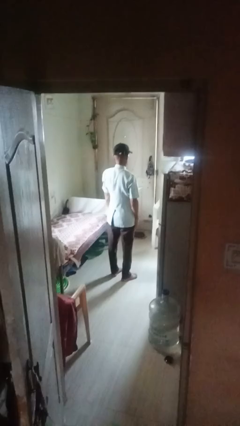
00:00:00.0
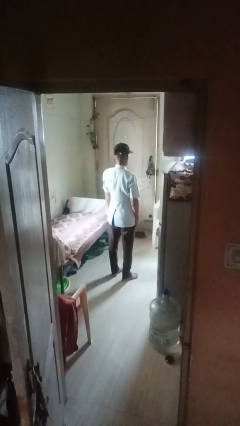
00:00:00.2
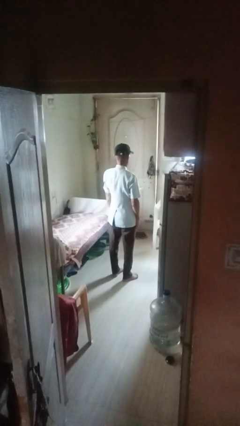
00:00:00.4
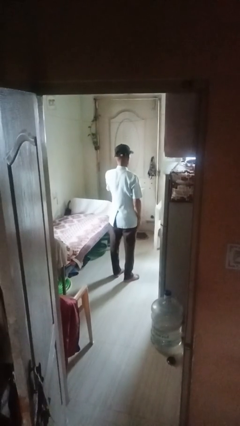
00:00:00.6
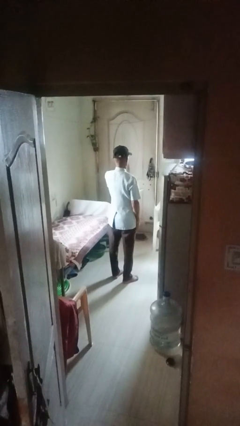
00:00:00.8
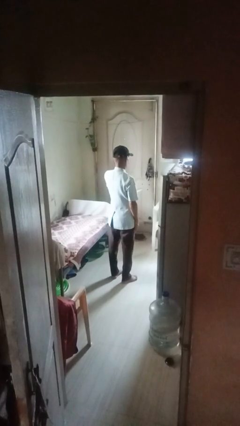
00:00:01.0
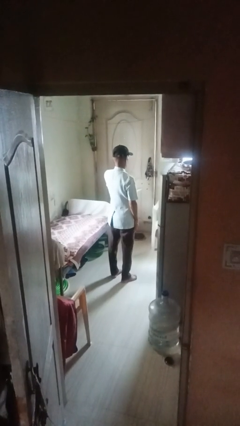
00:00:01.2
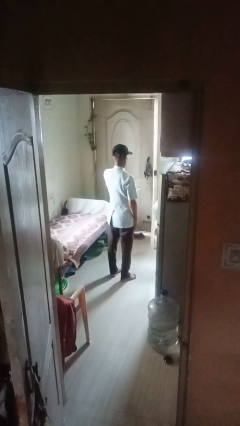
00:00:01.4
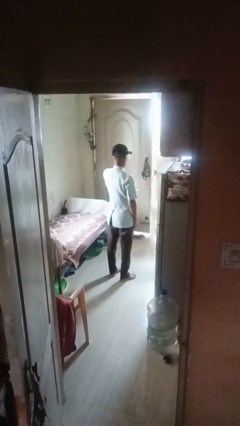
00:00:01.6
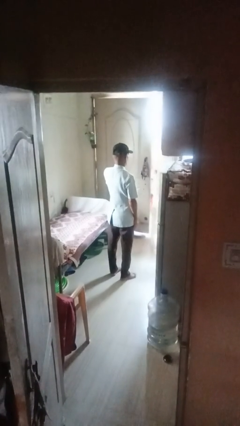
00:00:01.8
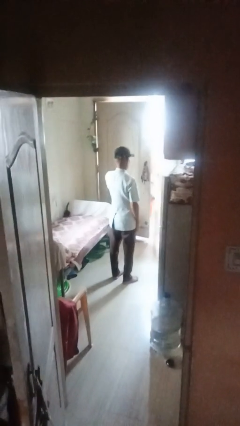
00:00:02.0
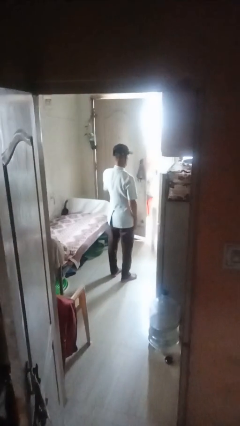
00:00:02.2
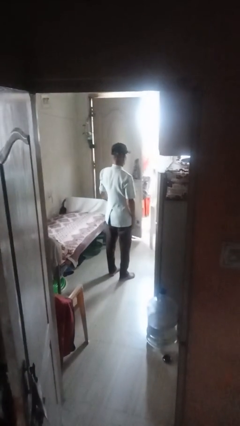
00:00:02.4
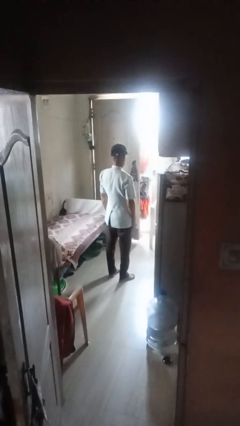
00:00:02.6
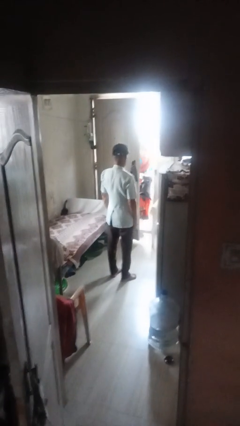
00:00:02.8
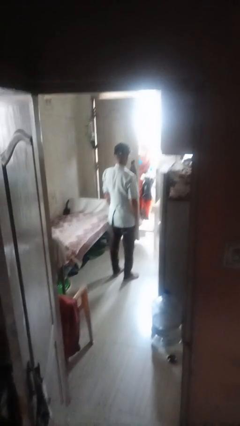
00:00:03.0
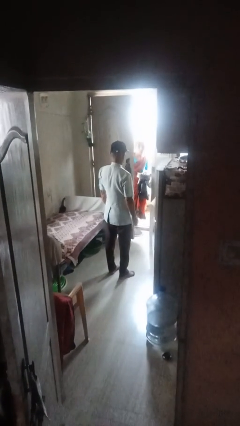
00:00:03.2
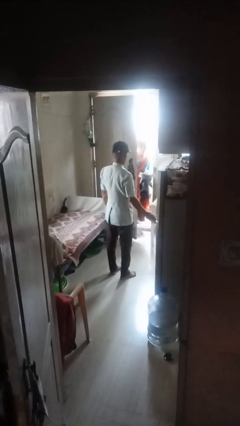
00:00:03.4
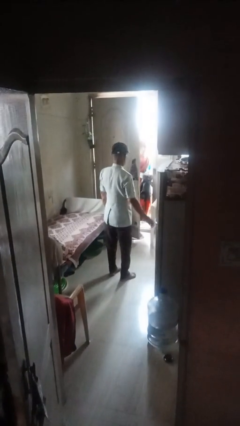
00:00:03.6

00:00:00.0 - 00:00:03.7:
person gestures stop

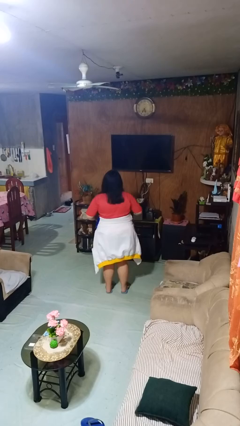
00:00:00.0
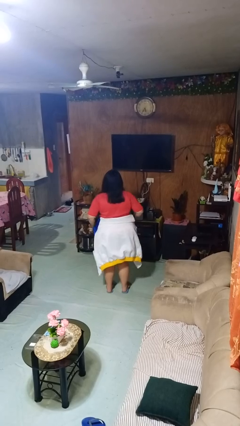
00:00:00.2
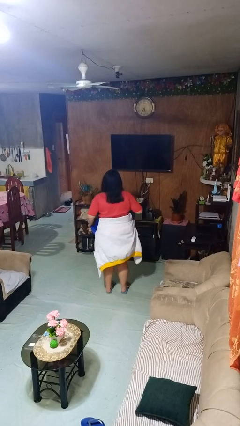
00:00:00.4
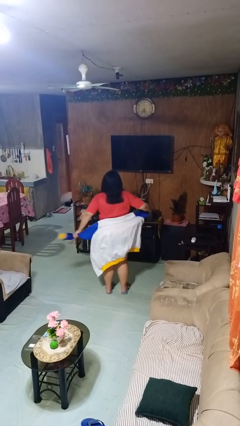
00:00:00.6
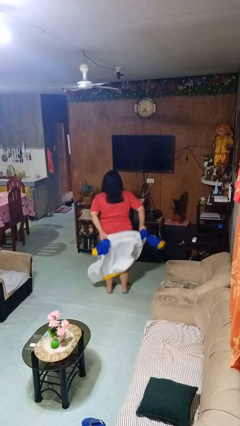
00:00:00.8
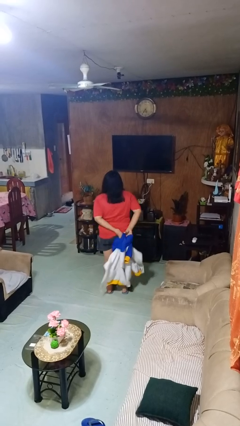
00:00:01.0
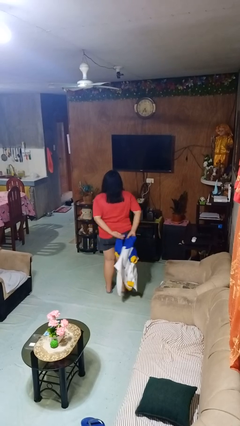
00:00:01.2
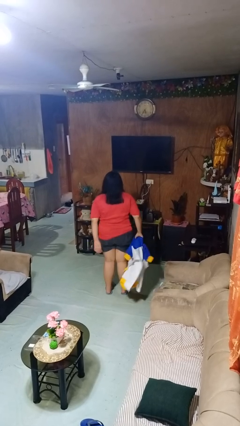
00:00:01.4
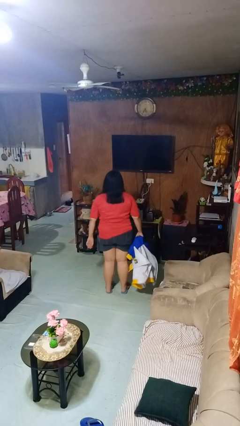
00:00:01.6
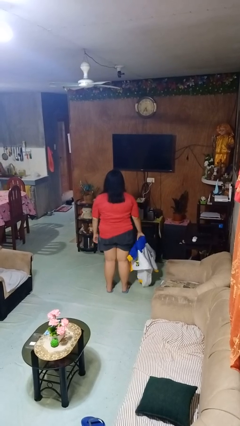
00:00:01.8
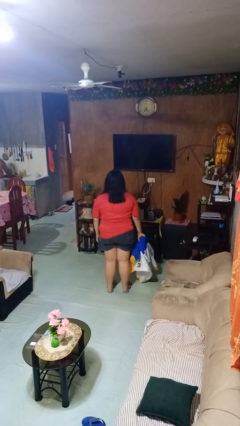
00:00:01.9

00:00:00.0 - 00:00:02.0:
person unties jacket around waist

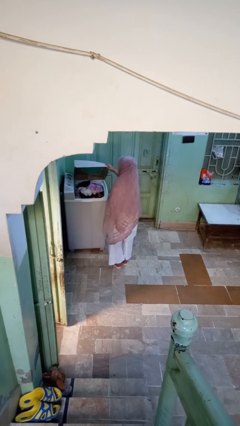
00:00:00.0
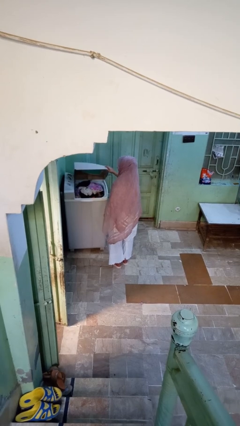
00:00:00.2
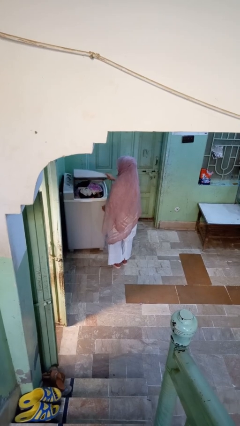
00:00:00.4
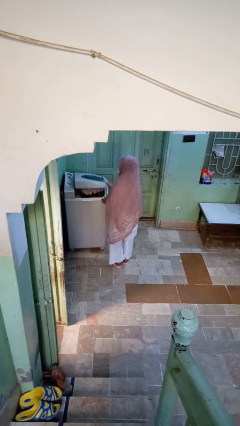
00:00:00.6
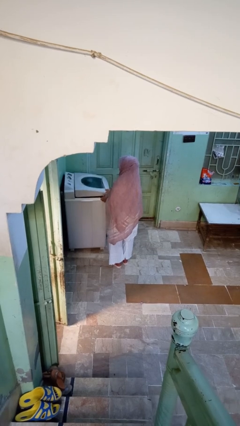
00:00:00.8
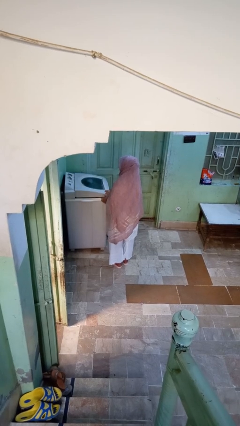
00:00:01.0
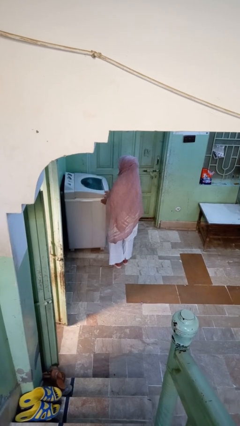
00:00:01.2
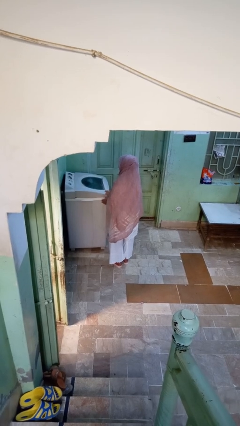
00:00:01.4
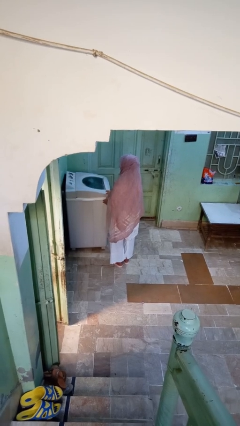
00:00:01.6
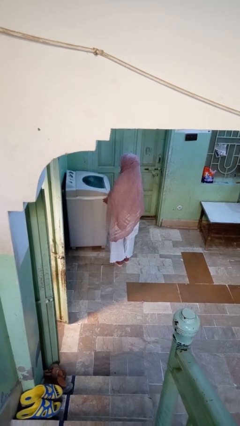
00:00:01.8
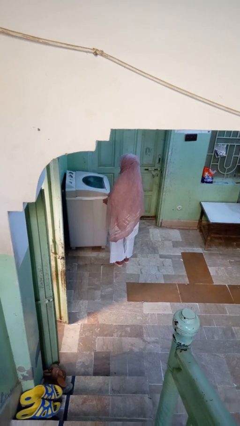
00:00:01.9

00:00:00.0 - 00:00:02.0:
person closes clothes washer

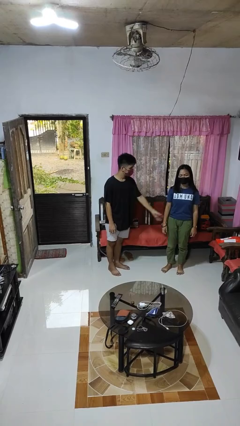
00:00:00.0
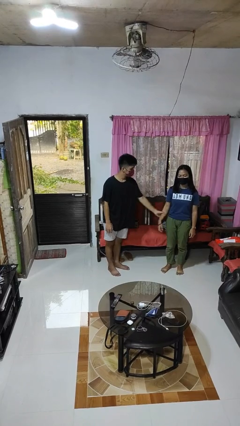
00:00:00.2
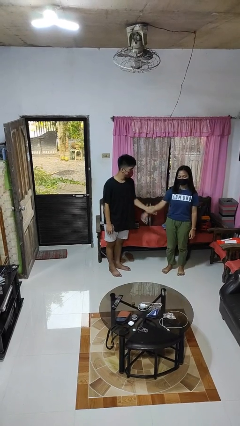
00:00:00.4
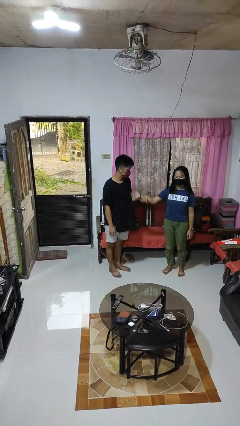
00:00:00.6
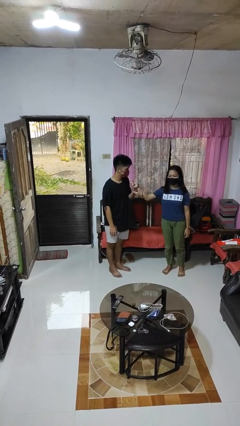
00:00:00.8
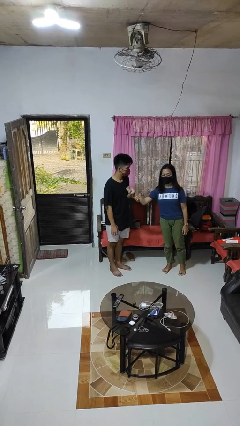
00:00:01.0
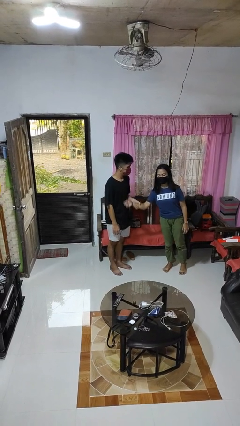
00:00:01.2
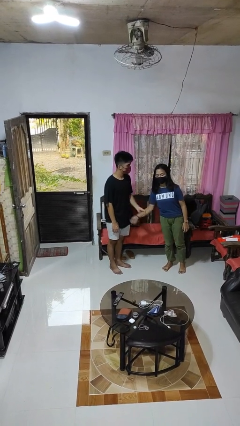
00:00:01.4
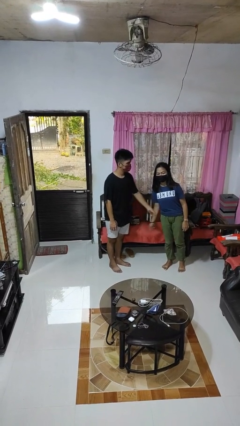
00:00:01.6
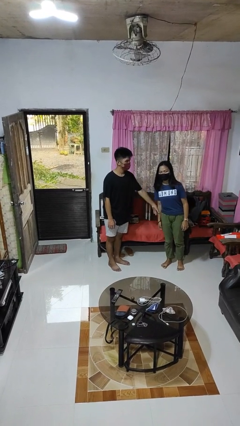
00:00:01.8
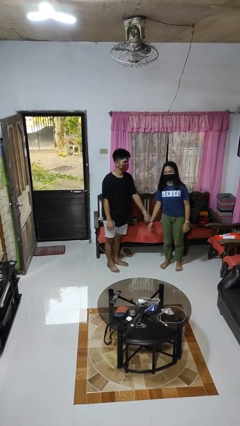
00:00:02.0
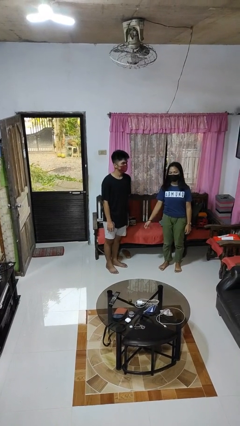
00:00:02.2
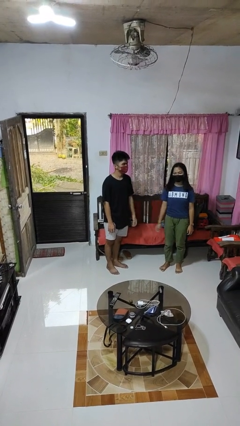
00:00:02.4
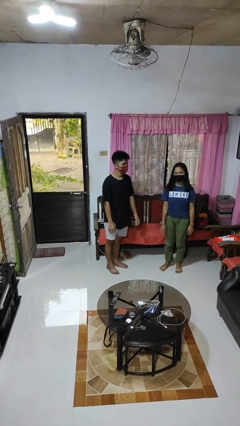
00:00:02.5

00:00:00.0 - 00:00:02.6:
person grabs person by forearm

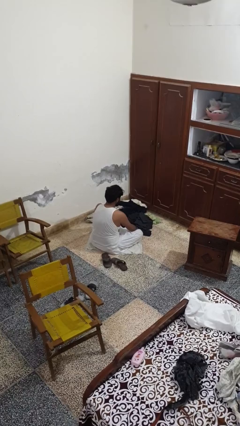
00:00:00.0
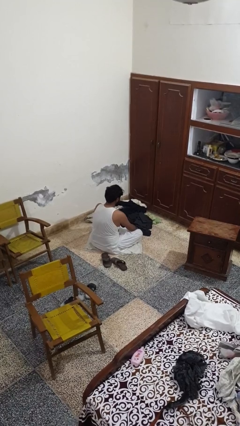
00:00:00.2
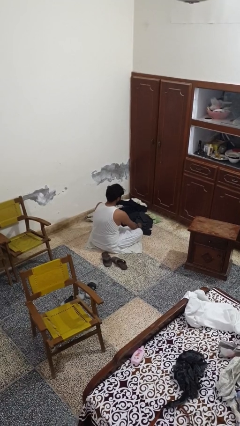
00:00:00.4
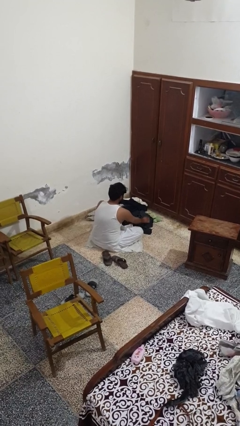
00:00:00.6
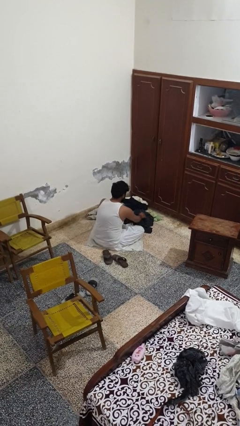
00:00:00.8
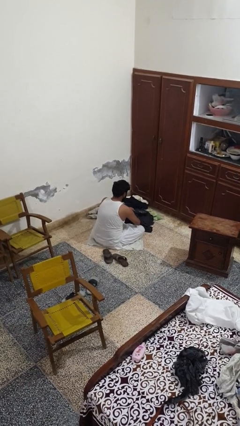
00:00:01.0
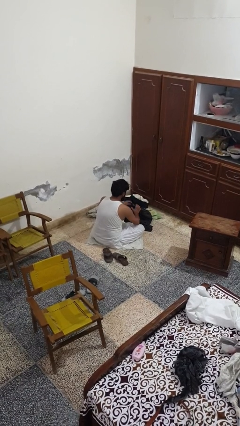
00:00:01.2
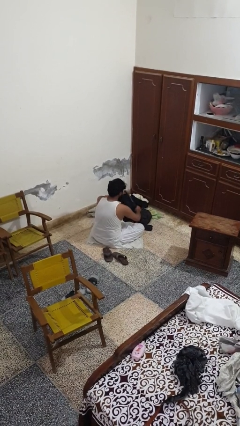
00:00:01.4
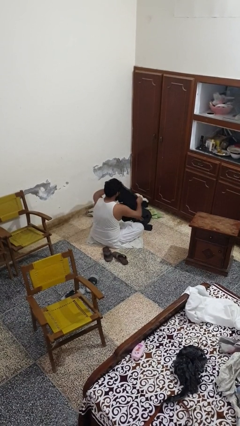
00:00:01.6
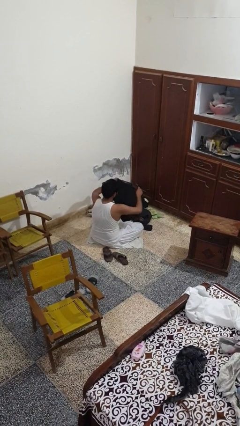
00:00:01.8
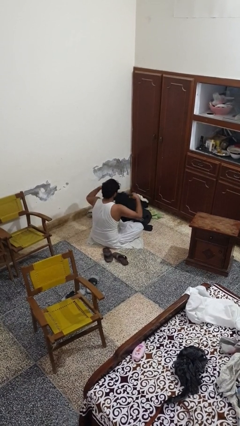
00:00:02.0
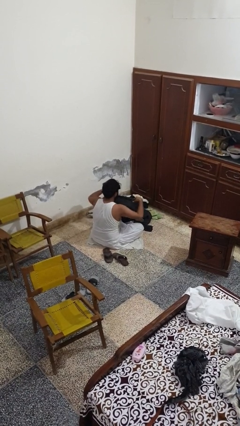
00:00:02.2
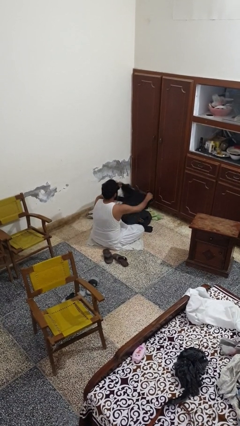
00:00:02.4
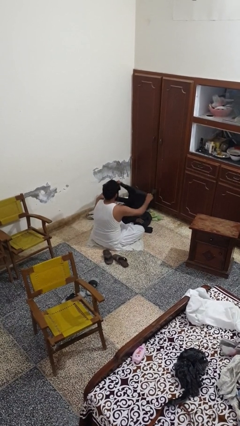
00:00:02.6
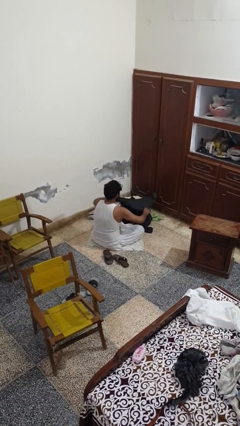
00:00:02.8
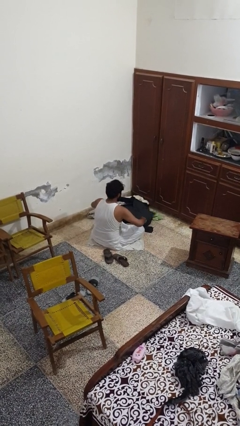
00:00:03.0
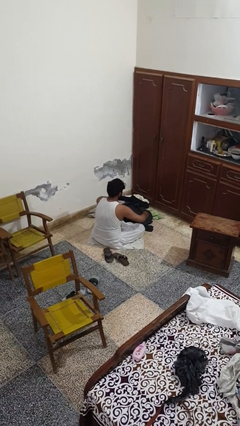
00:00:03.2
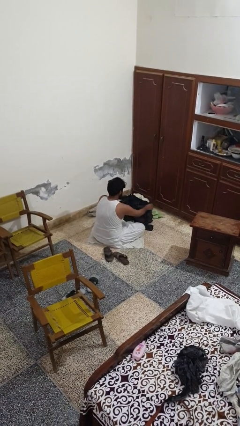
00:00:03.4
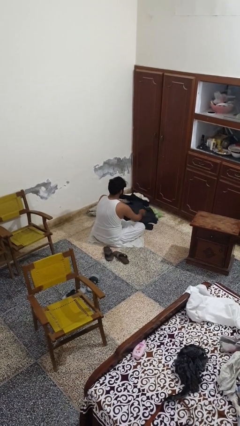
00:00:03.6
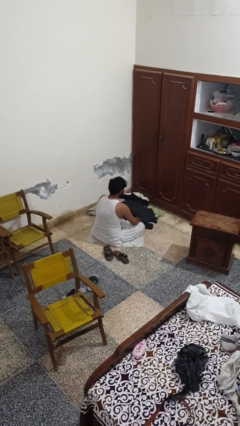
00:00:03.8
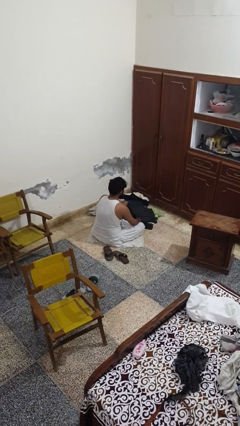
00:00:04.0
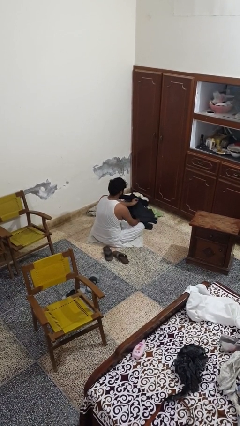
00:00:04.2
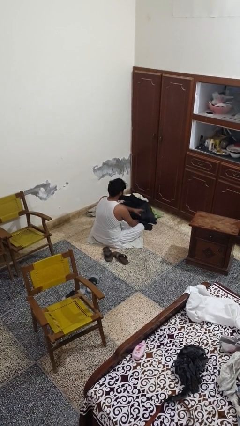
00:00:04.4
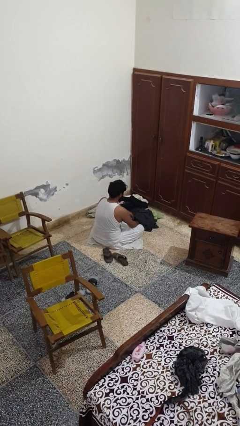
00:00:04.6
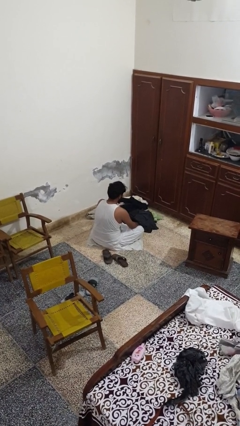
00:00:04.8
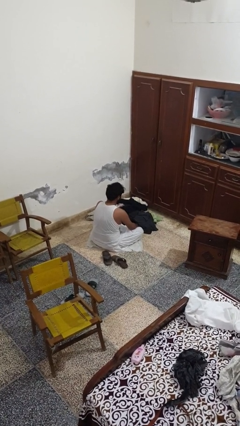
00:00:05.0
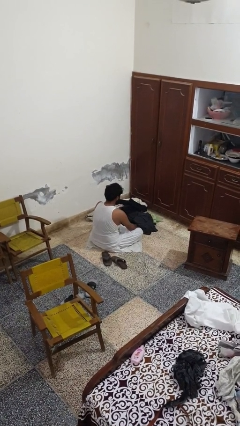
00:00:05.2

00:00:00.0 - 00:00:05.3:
person folds shirt

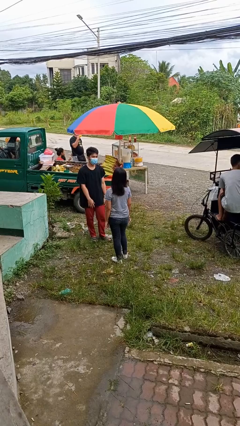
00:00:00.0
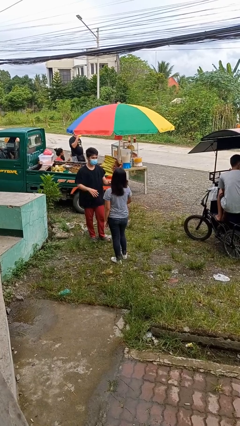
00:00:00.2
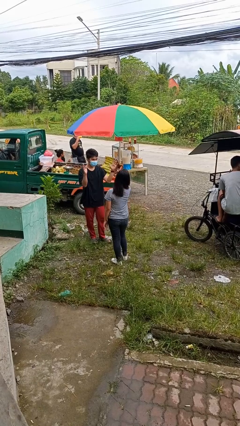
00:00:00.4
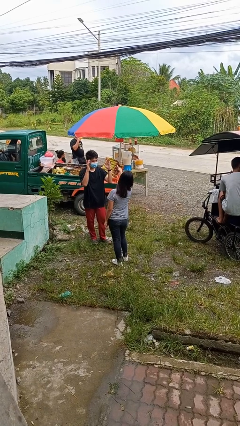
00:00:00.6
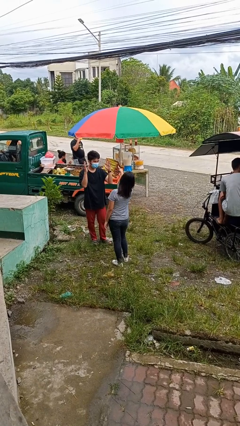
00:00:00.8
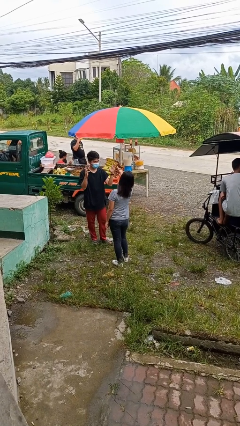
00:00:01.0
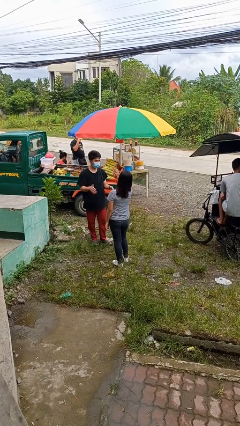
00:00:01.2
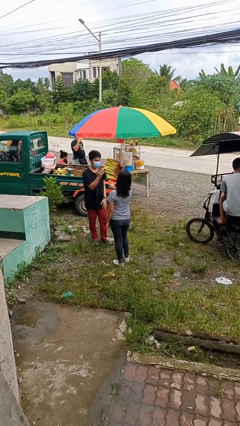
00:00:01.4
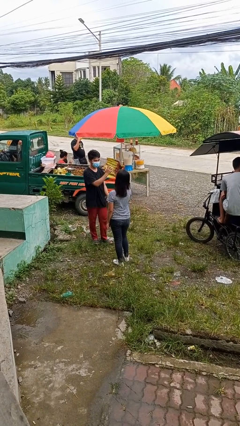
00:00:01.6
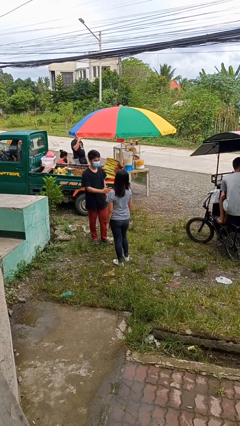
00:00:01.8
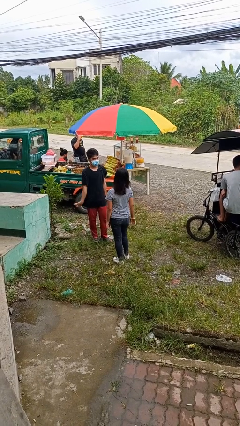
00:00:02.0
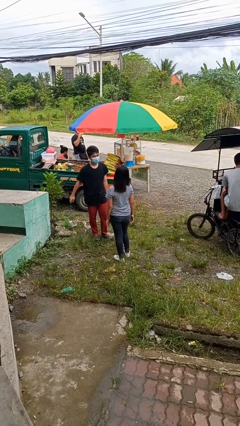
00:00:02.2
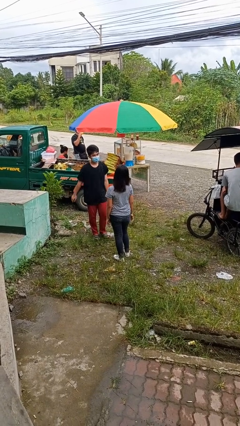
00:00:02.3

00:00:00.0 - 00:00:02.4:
person talks to person
